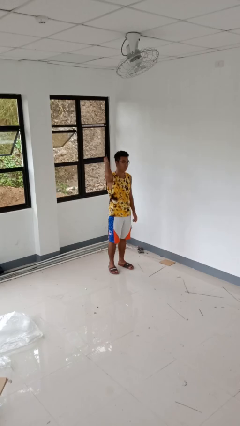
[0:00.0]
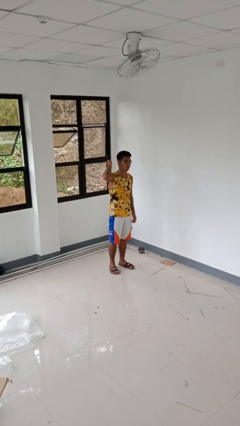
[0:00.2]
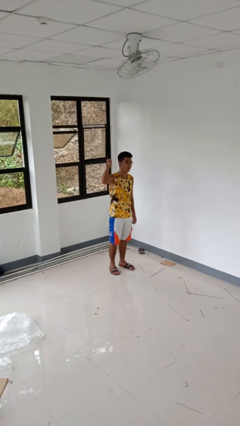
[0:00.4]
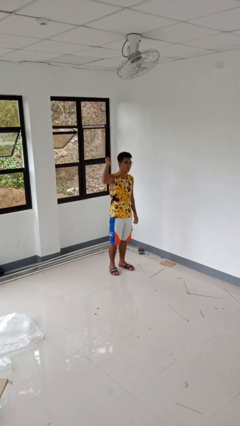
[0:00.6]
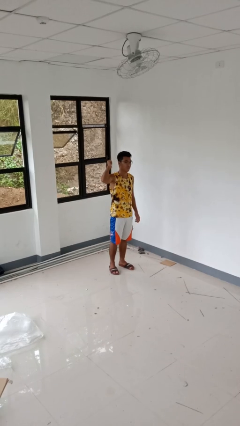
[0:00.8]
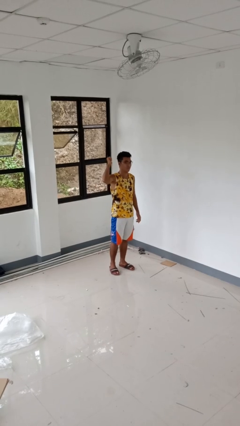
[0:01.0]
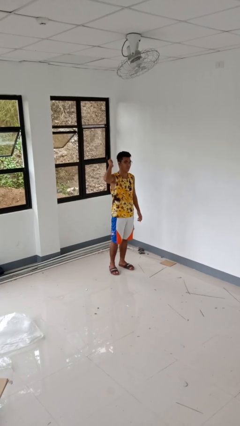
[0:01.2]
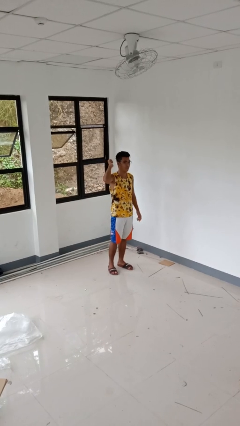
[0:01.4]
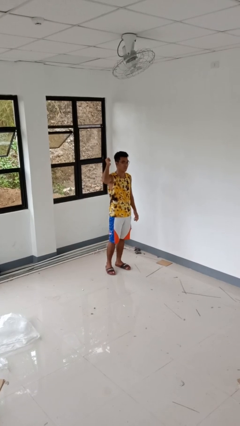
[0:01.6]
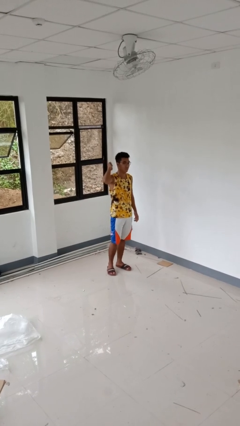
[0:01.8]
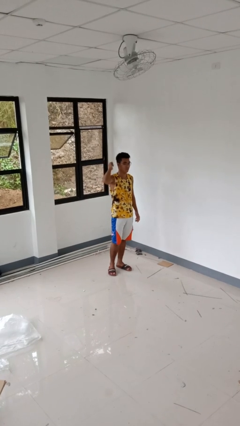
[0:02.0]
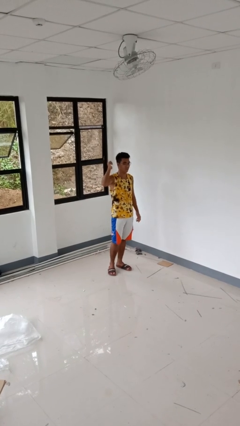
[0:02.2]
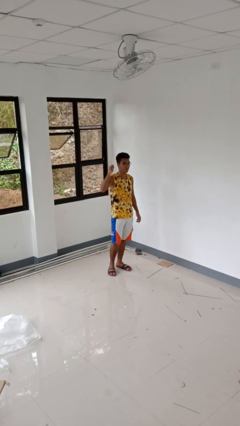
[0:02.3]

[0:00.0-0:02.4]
person gestures behind me

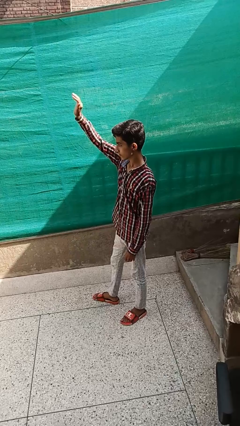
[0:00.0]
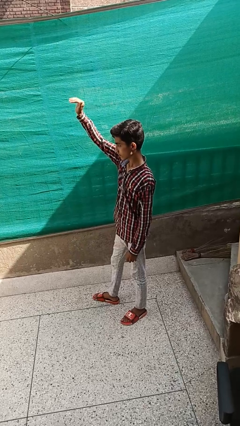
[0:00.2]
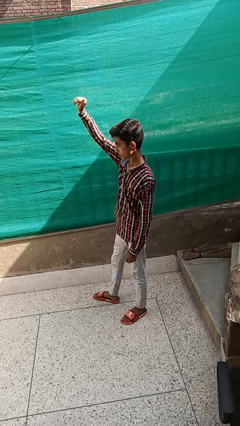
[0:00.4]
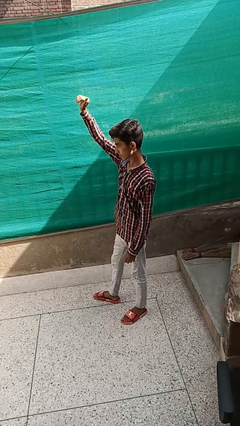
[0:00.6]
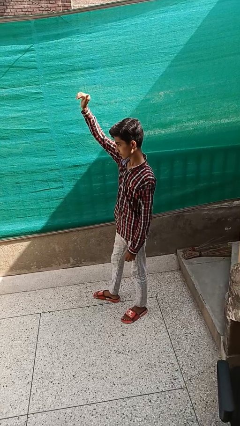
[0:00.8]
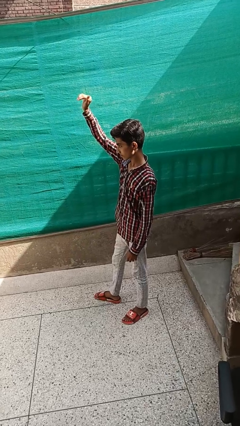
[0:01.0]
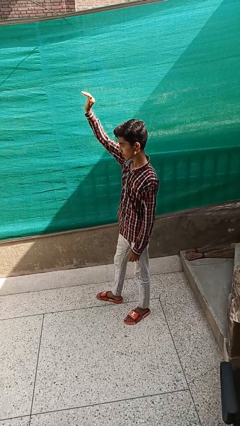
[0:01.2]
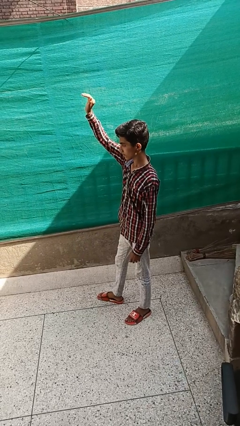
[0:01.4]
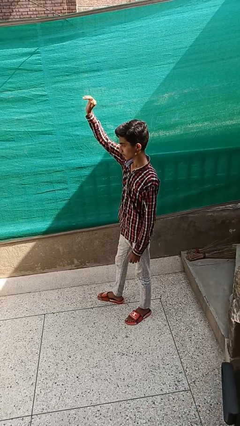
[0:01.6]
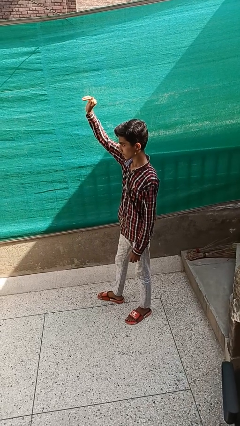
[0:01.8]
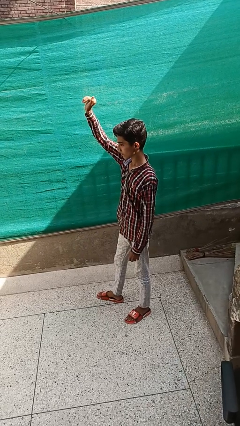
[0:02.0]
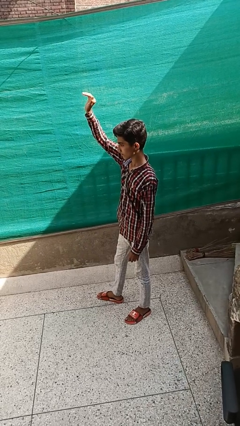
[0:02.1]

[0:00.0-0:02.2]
person gestures come here

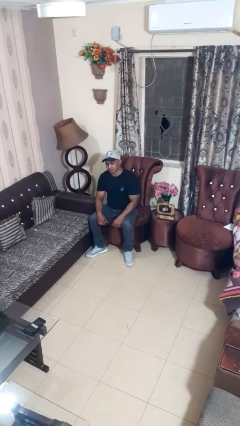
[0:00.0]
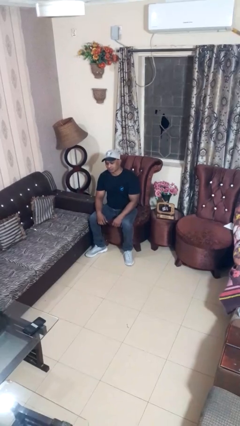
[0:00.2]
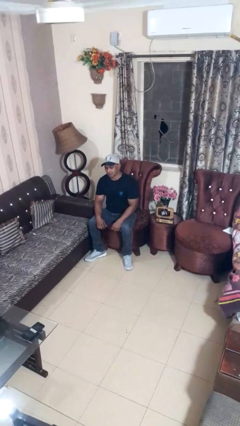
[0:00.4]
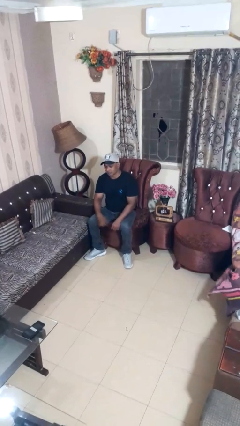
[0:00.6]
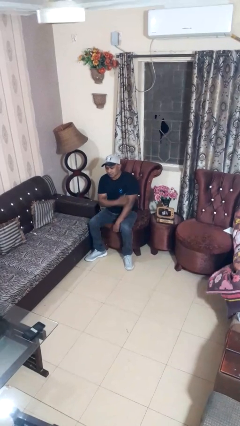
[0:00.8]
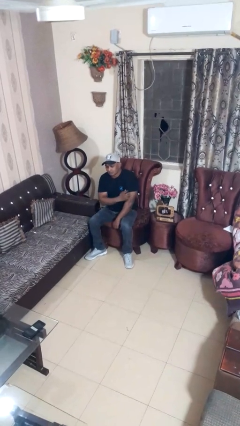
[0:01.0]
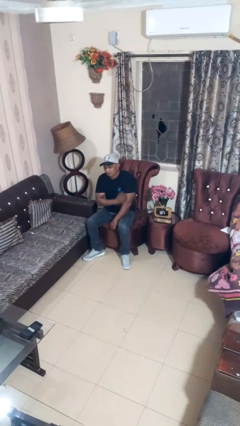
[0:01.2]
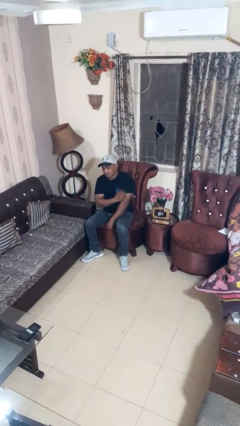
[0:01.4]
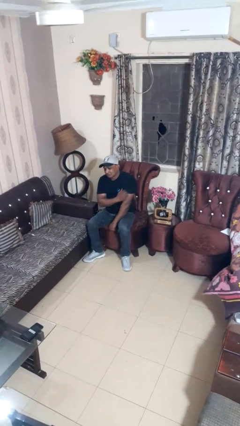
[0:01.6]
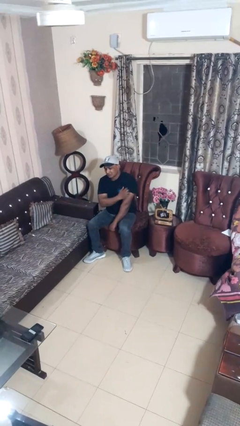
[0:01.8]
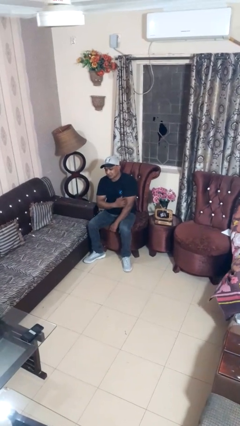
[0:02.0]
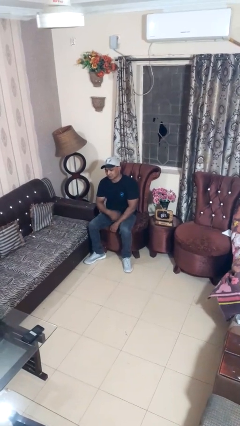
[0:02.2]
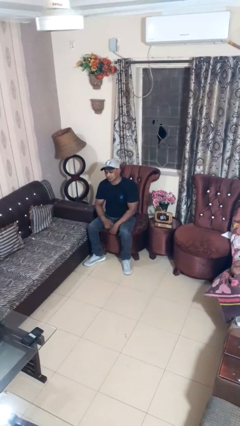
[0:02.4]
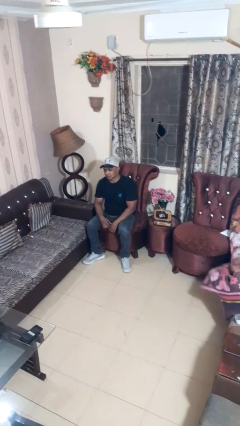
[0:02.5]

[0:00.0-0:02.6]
person scratches face

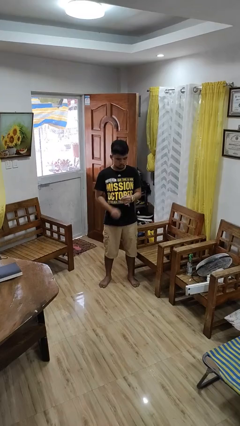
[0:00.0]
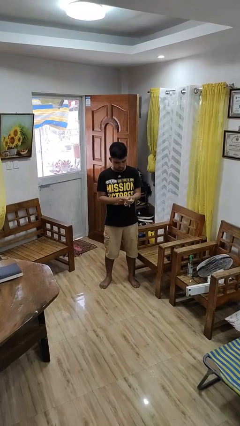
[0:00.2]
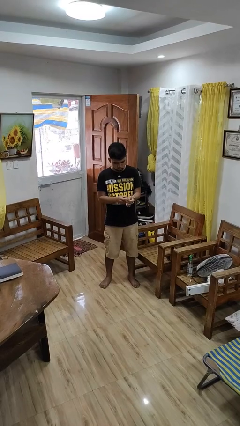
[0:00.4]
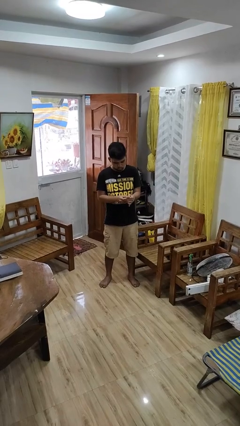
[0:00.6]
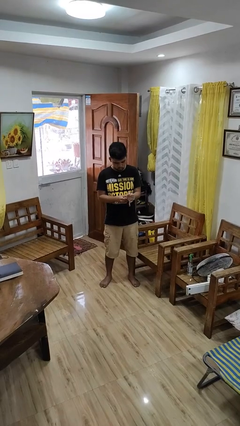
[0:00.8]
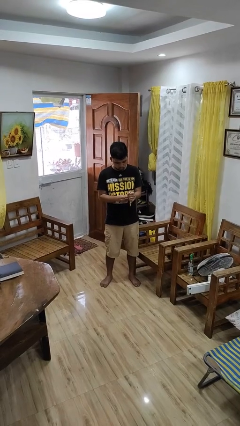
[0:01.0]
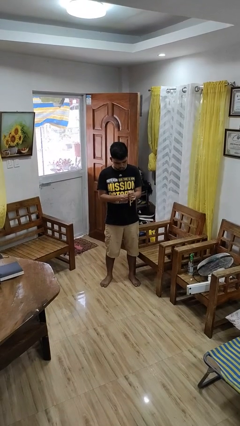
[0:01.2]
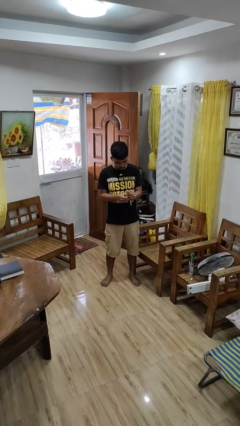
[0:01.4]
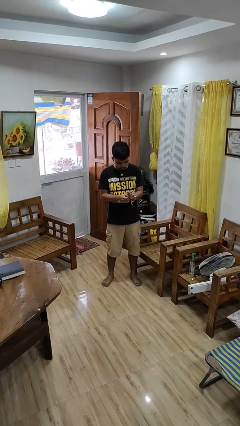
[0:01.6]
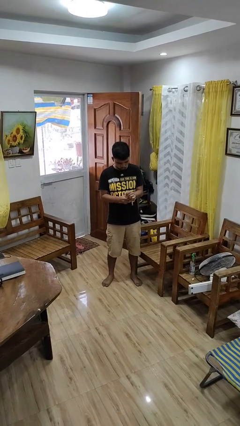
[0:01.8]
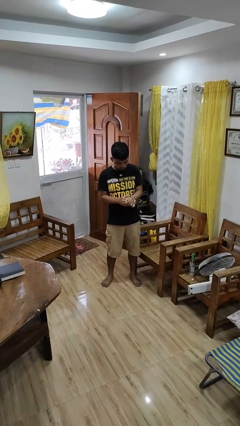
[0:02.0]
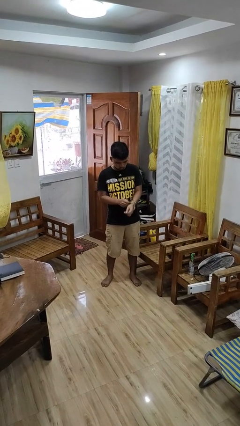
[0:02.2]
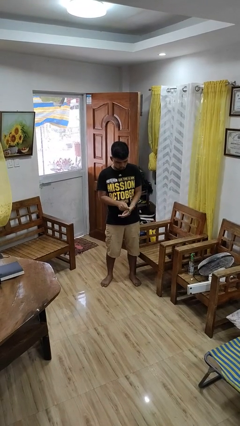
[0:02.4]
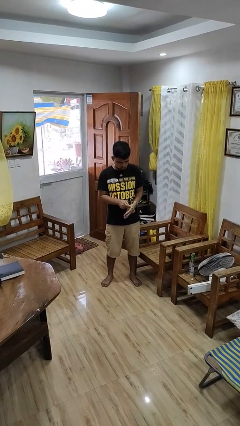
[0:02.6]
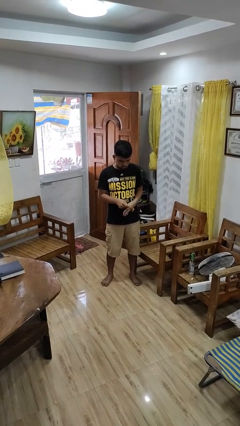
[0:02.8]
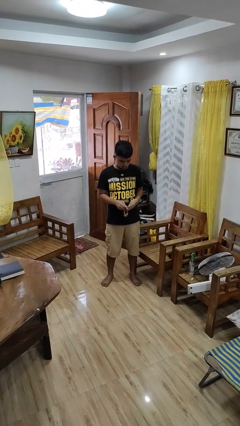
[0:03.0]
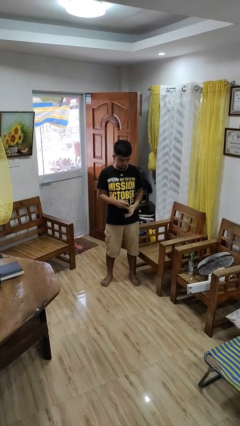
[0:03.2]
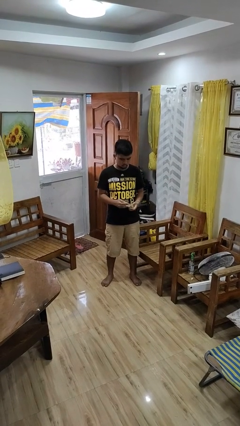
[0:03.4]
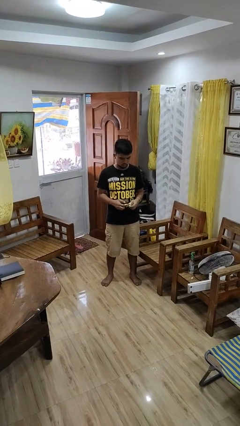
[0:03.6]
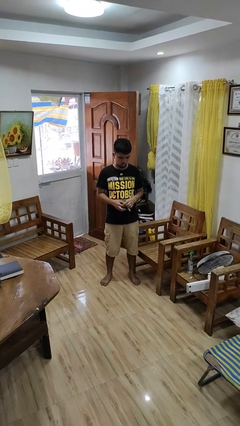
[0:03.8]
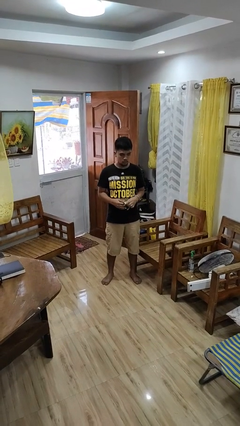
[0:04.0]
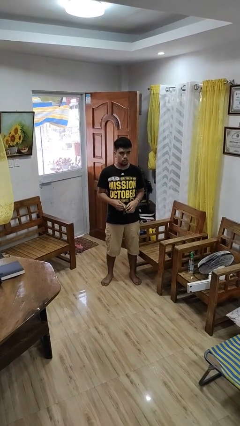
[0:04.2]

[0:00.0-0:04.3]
person takes off wristwatch

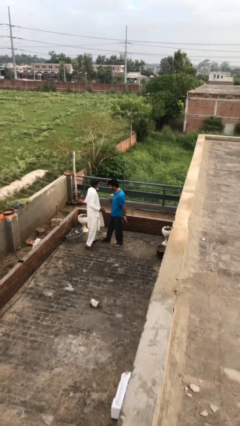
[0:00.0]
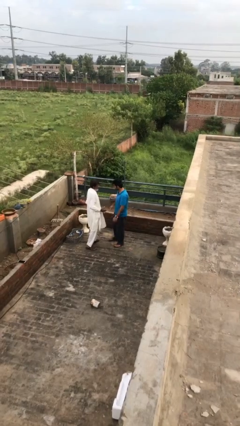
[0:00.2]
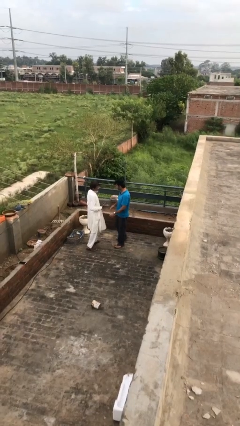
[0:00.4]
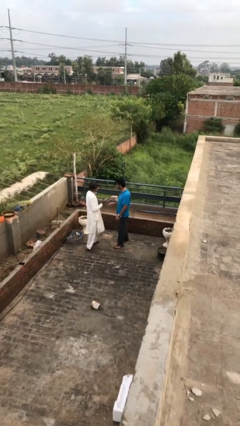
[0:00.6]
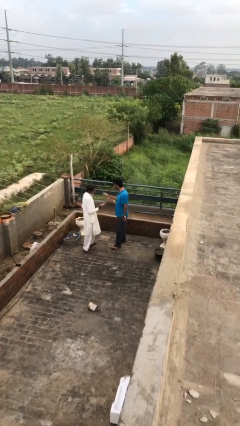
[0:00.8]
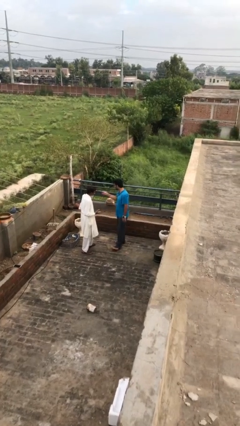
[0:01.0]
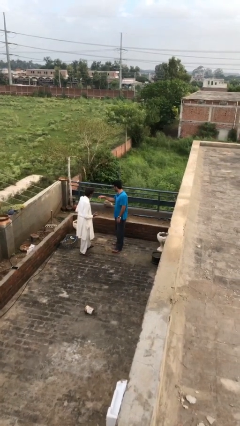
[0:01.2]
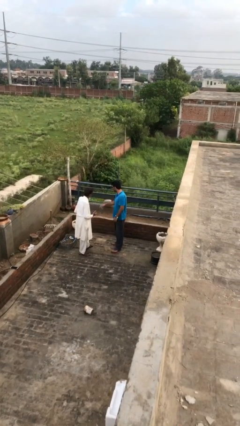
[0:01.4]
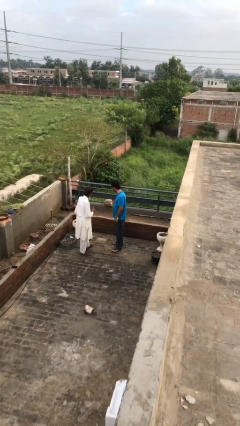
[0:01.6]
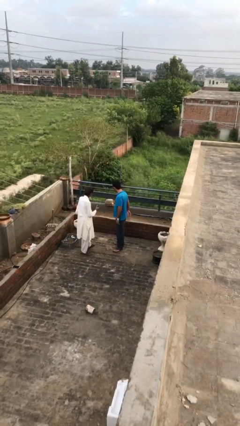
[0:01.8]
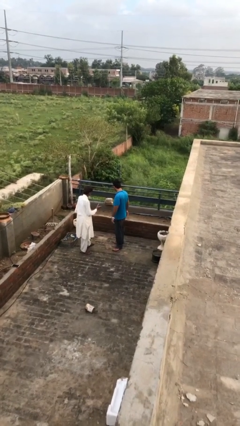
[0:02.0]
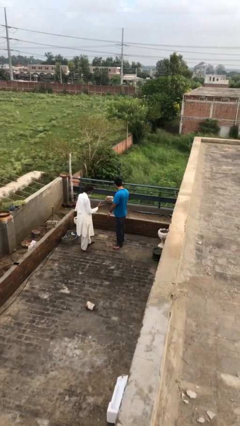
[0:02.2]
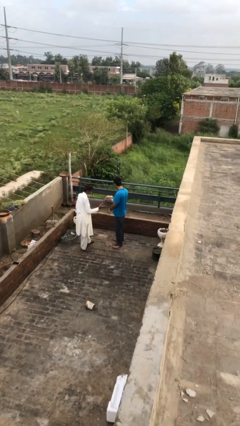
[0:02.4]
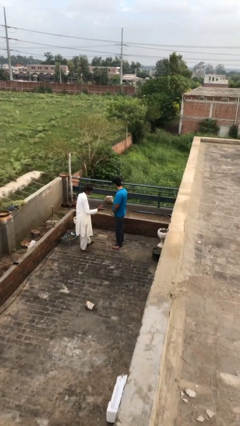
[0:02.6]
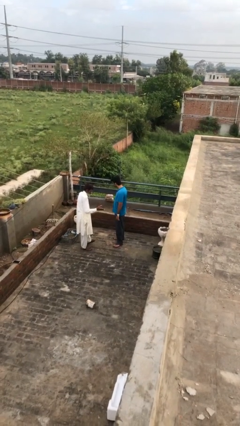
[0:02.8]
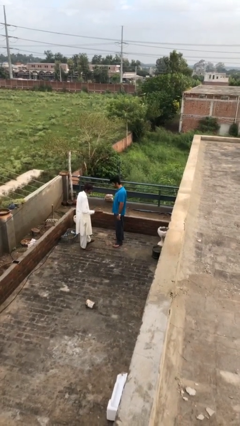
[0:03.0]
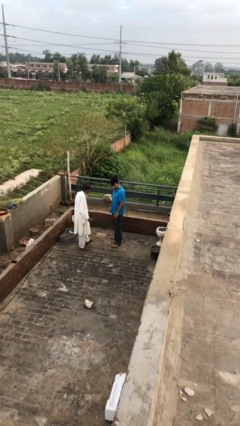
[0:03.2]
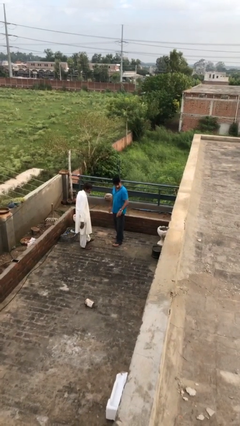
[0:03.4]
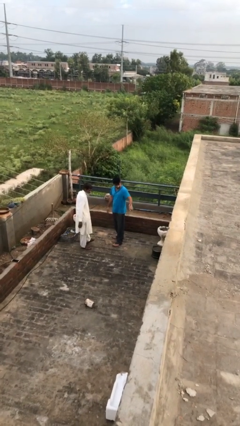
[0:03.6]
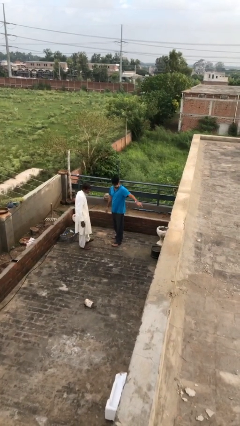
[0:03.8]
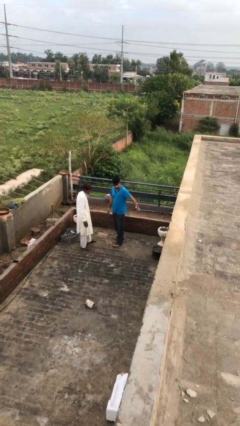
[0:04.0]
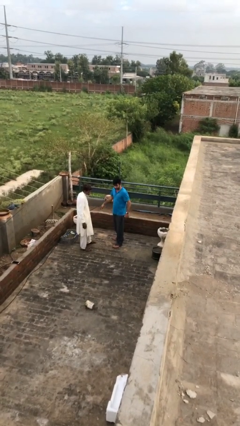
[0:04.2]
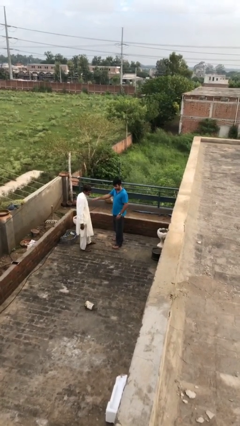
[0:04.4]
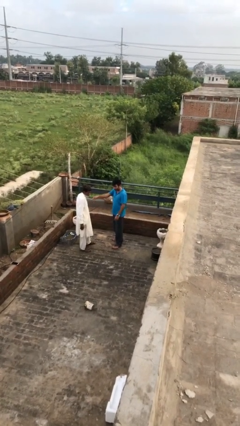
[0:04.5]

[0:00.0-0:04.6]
person talks to person

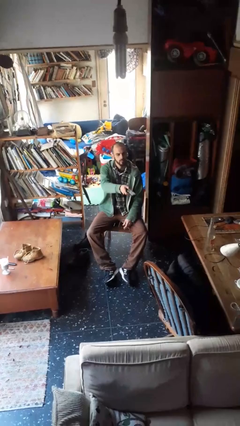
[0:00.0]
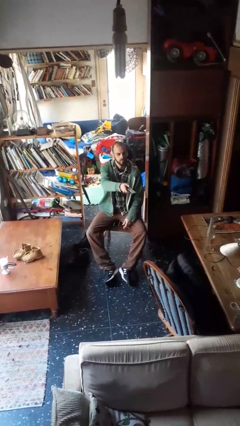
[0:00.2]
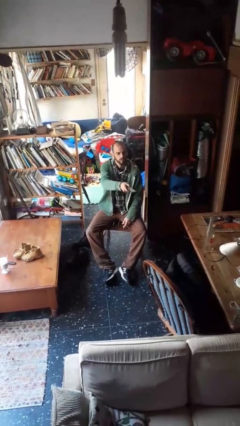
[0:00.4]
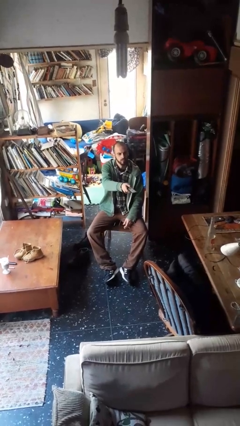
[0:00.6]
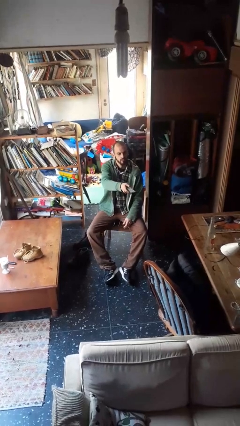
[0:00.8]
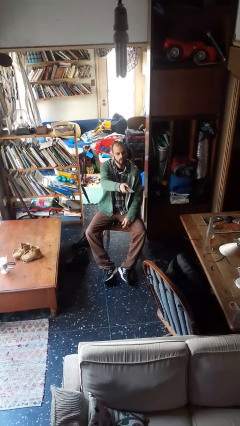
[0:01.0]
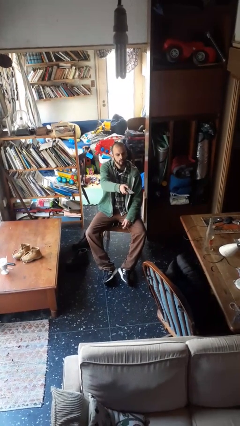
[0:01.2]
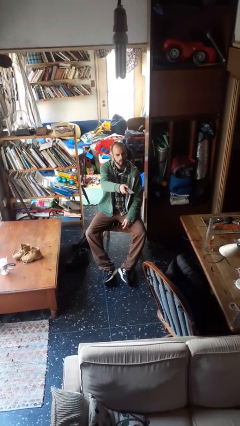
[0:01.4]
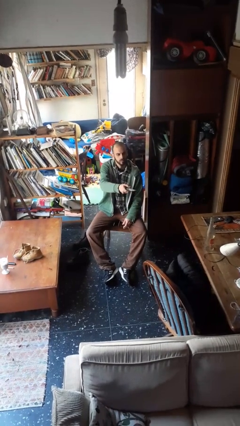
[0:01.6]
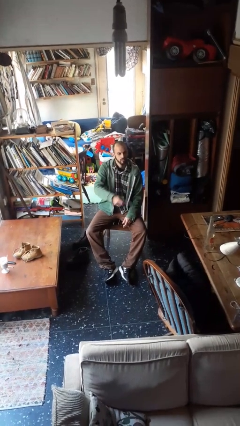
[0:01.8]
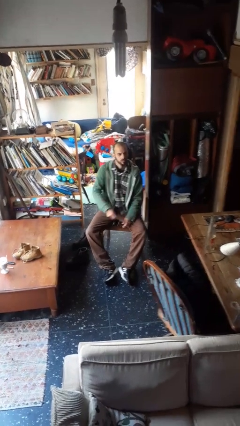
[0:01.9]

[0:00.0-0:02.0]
person uses television remote
